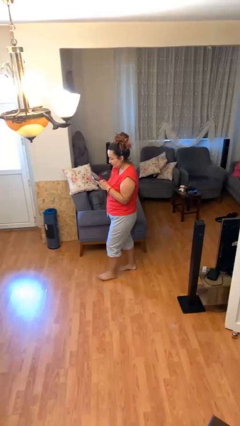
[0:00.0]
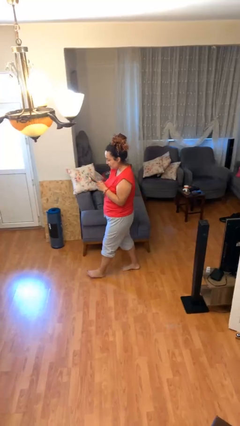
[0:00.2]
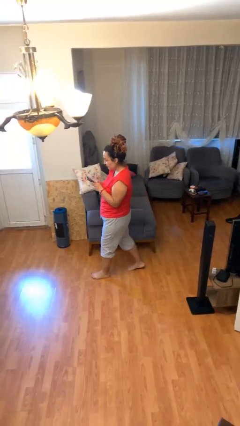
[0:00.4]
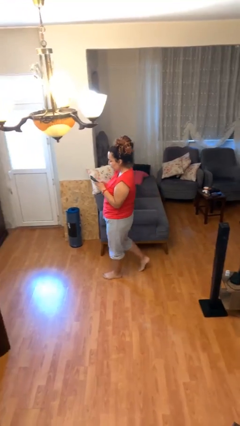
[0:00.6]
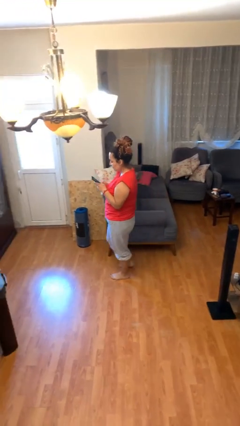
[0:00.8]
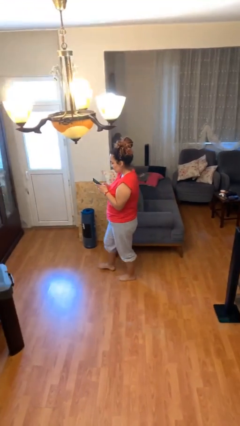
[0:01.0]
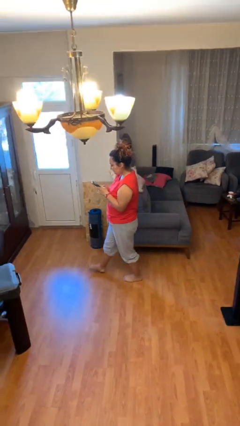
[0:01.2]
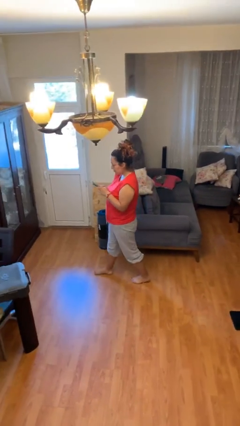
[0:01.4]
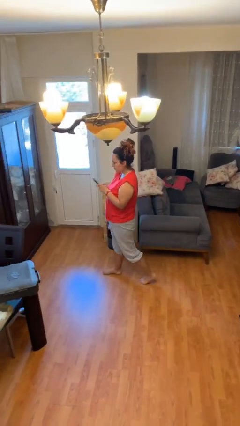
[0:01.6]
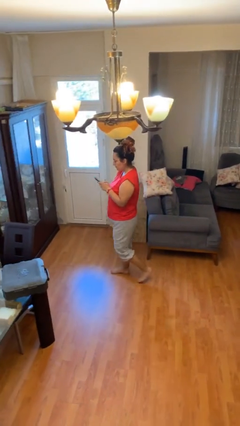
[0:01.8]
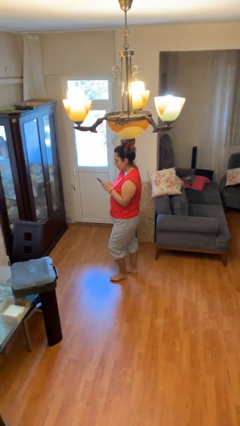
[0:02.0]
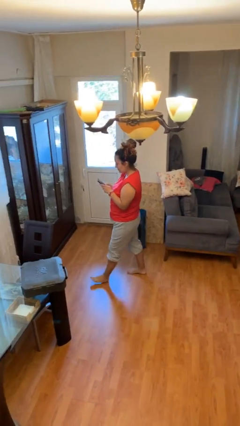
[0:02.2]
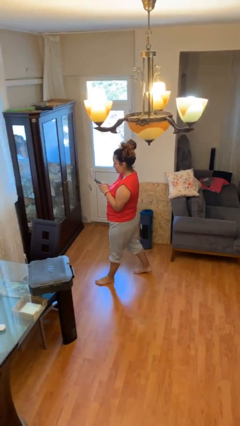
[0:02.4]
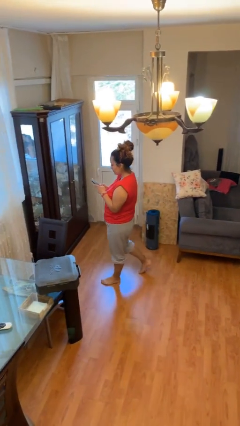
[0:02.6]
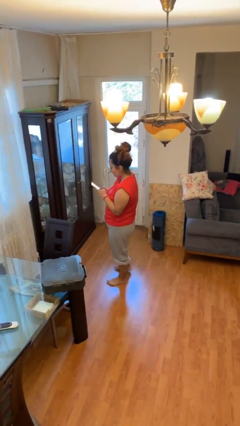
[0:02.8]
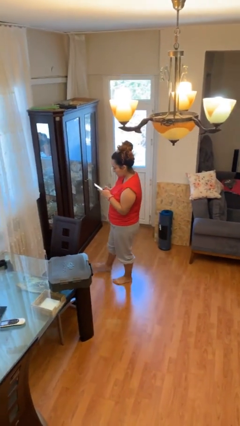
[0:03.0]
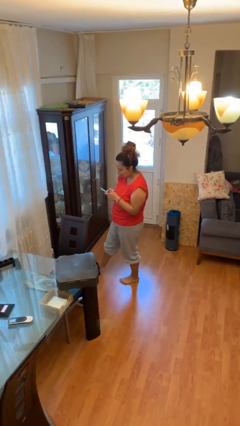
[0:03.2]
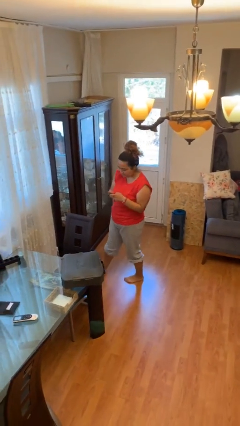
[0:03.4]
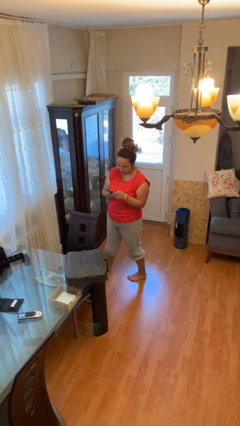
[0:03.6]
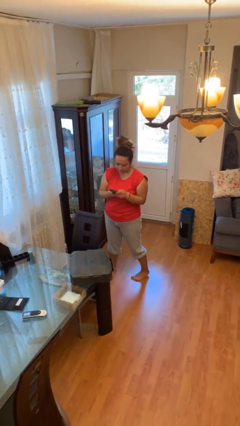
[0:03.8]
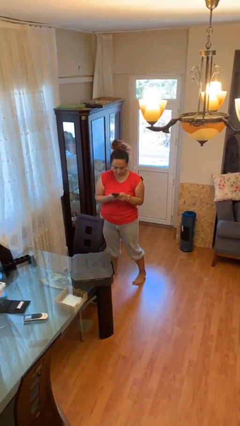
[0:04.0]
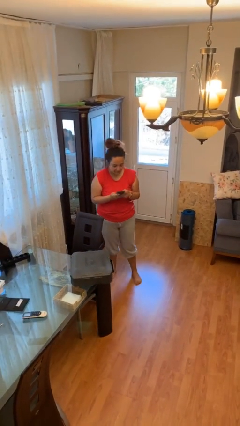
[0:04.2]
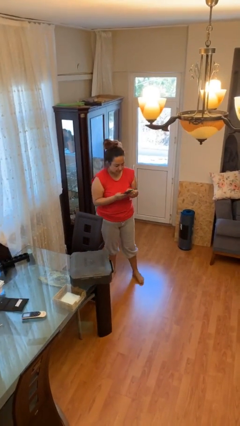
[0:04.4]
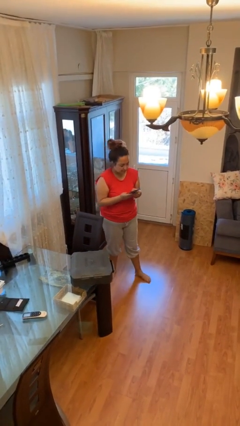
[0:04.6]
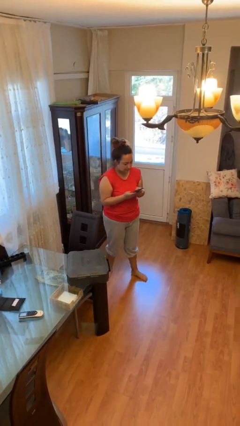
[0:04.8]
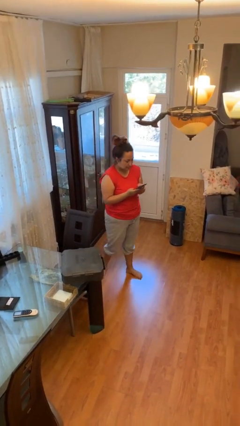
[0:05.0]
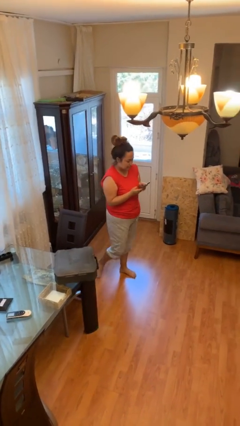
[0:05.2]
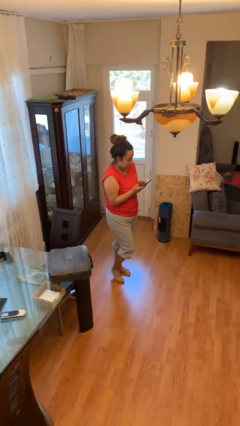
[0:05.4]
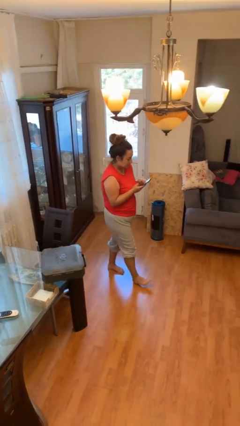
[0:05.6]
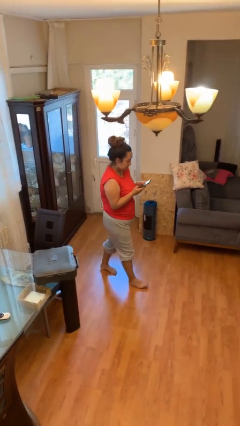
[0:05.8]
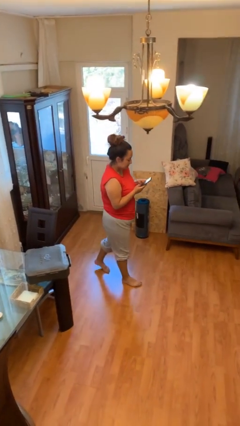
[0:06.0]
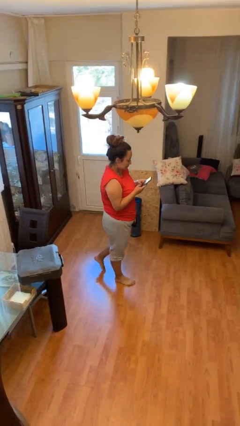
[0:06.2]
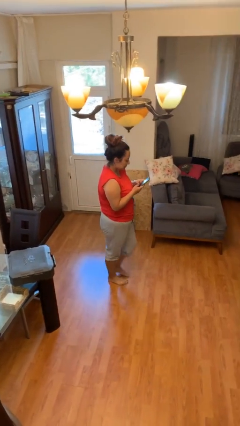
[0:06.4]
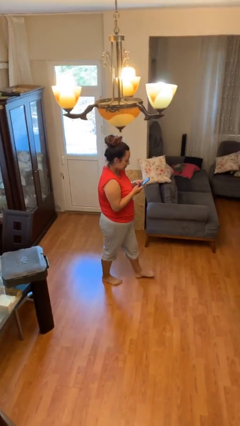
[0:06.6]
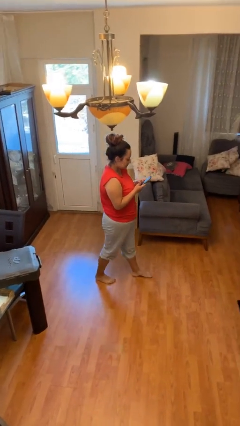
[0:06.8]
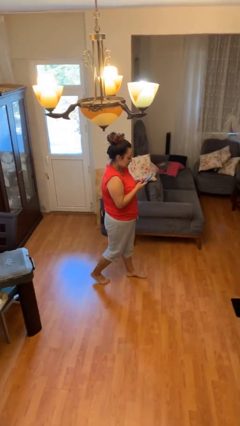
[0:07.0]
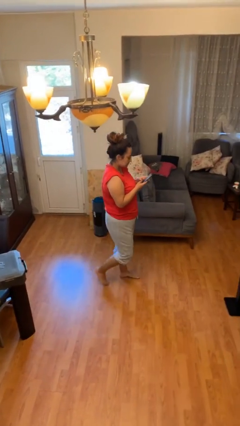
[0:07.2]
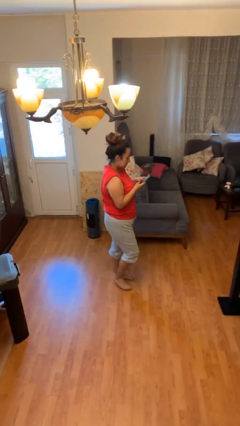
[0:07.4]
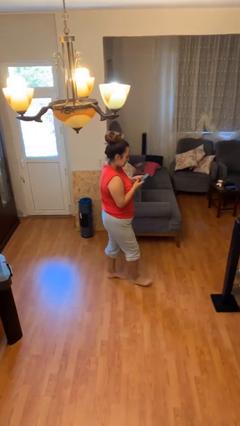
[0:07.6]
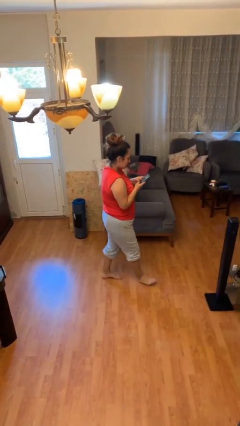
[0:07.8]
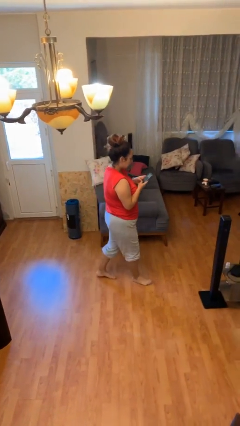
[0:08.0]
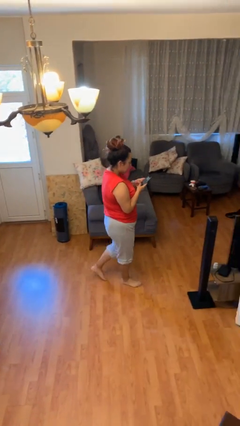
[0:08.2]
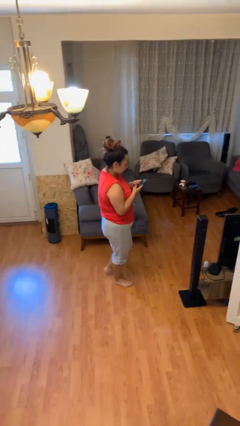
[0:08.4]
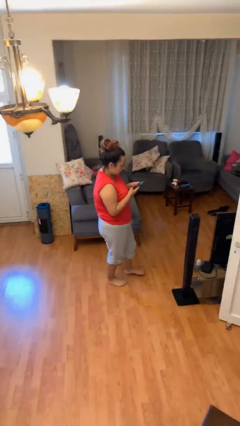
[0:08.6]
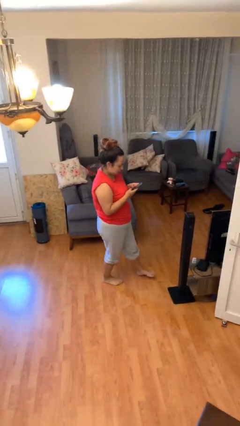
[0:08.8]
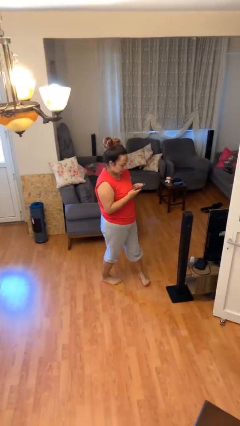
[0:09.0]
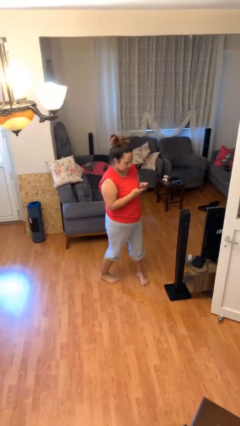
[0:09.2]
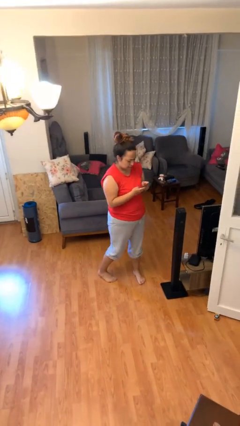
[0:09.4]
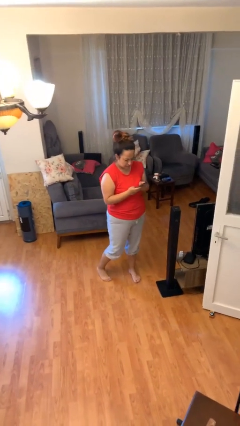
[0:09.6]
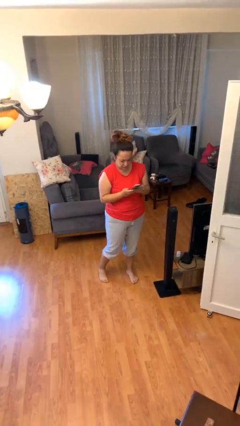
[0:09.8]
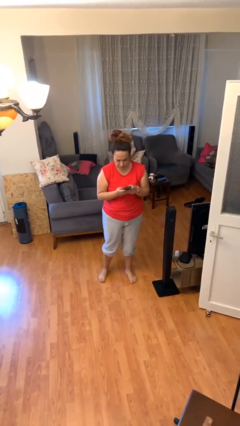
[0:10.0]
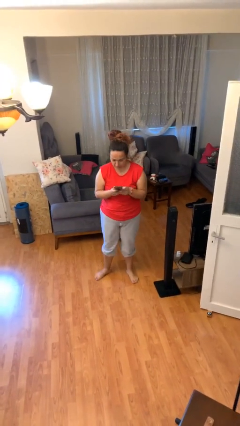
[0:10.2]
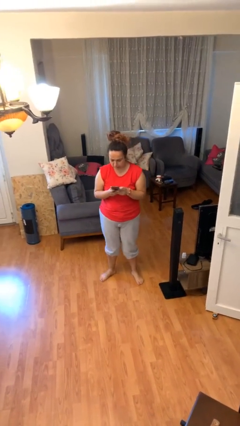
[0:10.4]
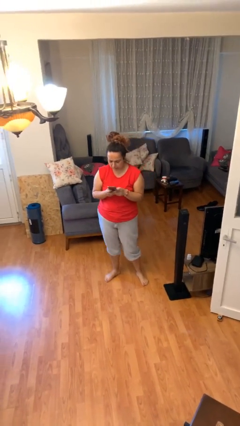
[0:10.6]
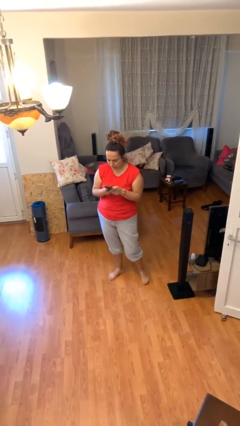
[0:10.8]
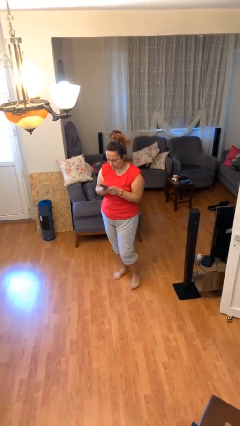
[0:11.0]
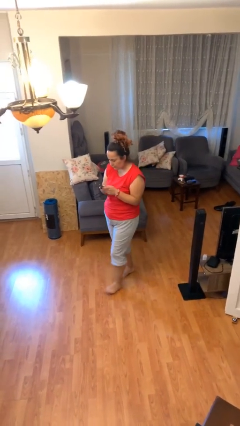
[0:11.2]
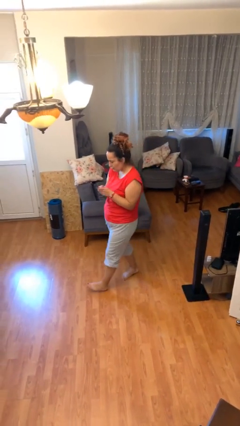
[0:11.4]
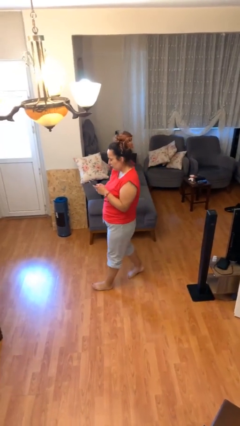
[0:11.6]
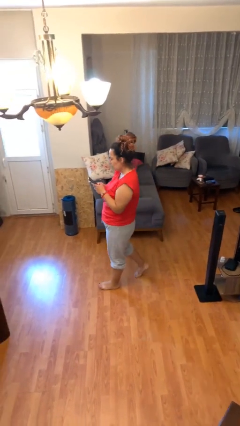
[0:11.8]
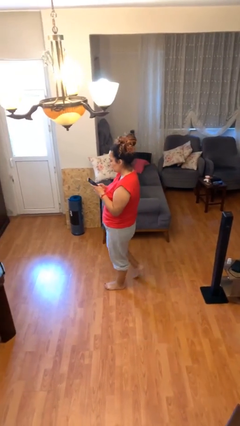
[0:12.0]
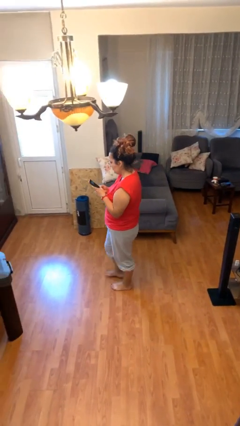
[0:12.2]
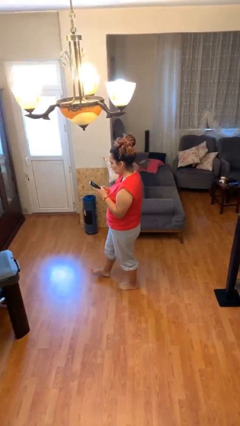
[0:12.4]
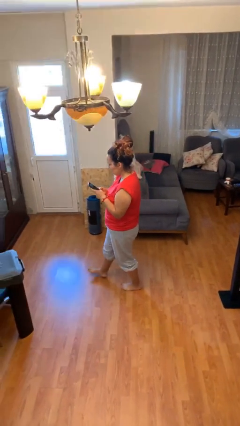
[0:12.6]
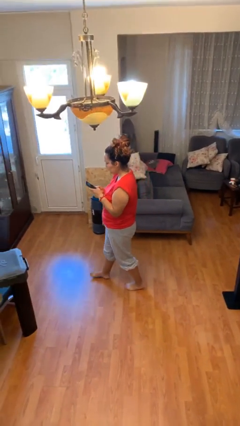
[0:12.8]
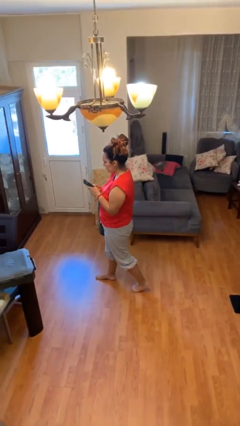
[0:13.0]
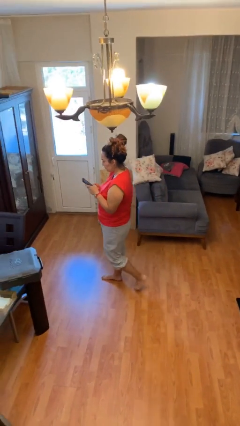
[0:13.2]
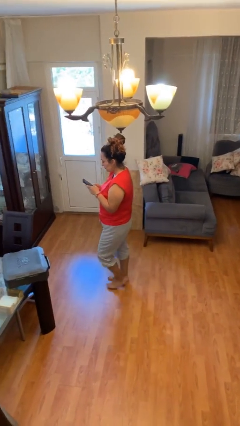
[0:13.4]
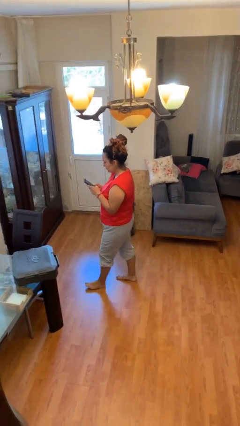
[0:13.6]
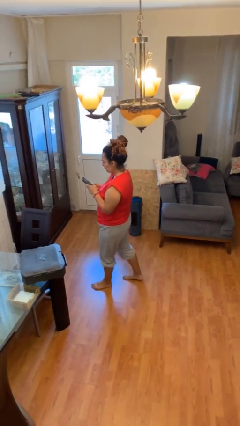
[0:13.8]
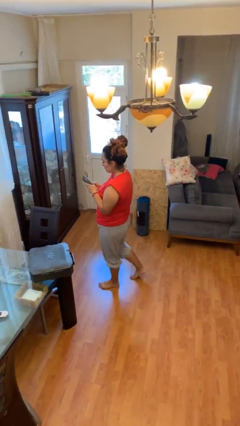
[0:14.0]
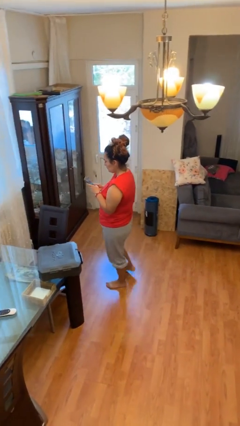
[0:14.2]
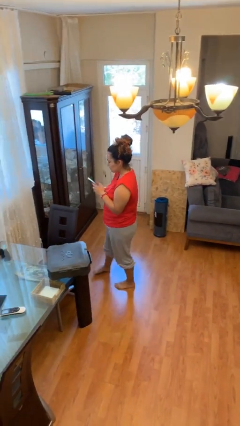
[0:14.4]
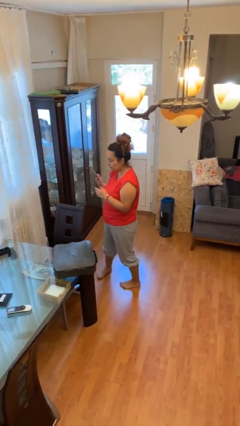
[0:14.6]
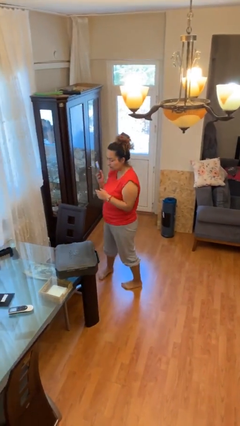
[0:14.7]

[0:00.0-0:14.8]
person texts on phone

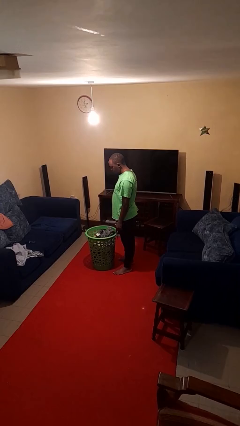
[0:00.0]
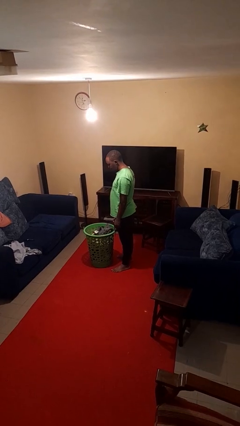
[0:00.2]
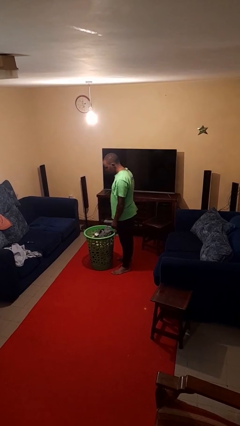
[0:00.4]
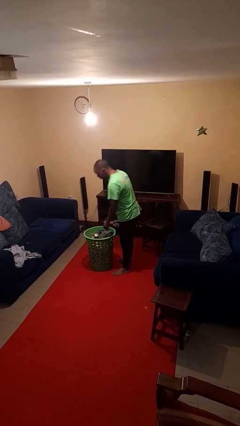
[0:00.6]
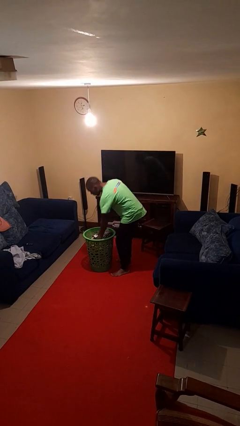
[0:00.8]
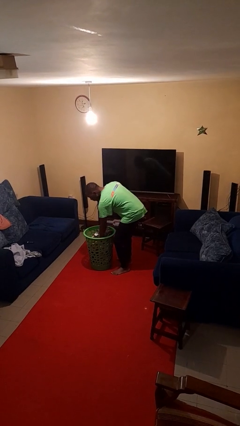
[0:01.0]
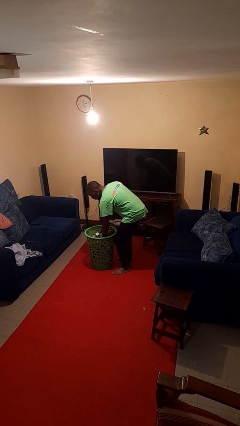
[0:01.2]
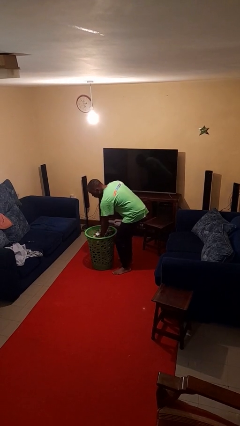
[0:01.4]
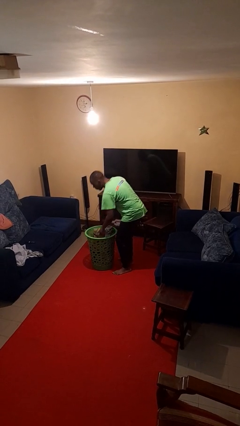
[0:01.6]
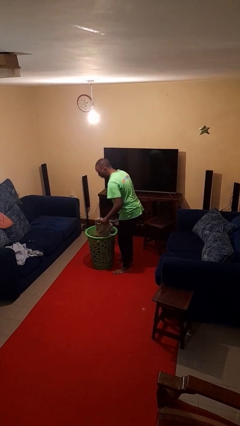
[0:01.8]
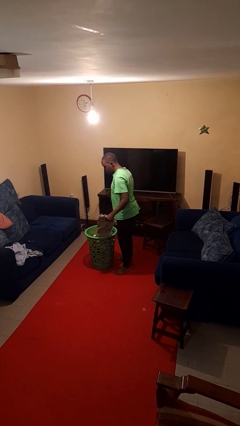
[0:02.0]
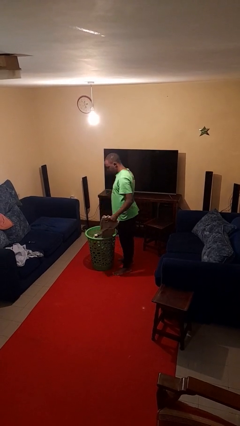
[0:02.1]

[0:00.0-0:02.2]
person takes object from basket

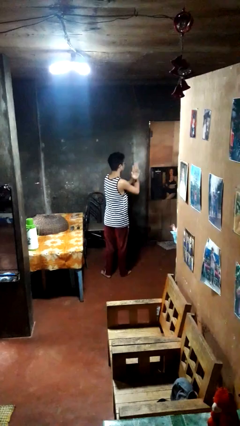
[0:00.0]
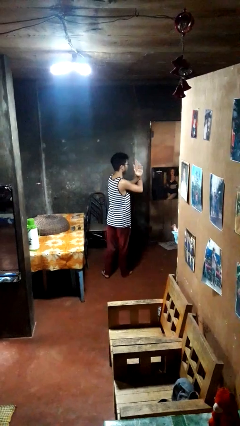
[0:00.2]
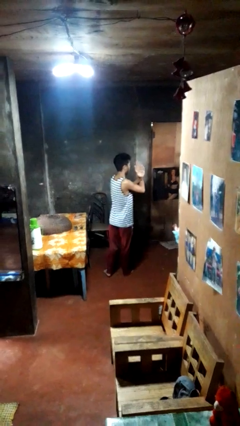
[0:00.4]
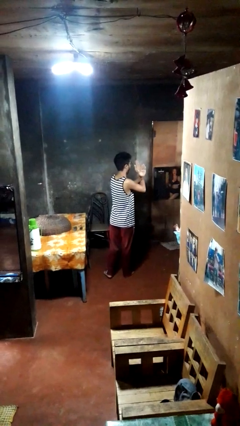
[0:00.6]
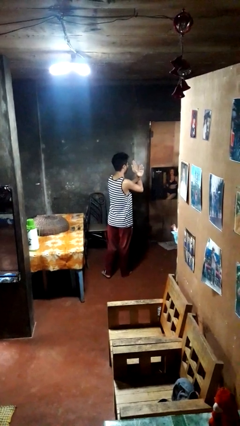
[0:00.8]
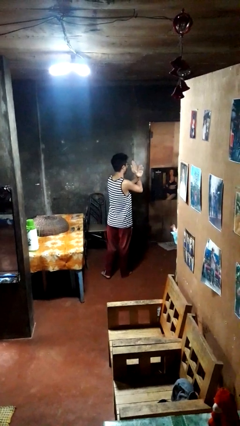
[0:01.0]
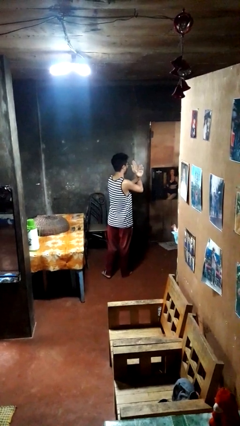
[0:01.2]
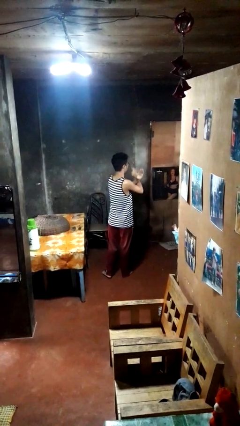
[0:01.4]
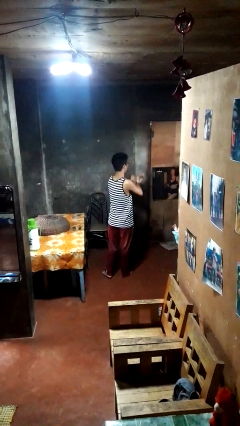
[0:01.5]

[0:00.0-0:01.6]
person gestures arms x
